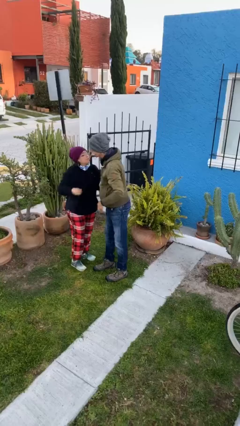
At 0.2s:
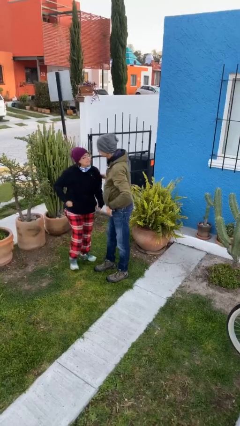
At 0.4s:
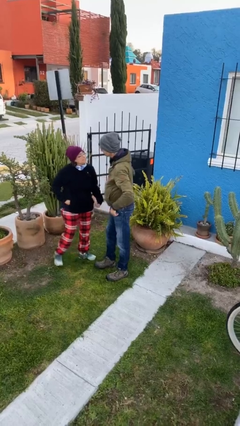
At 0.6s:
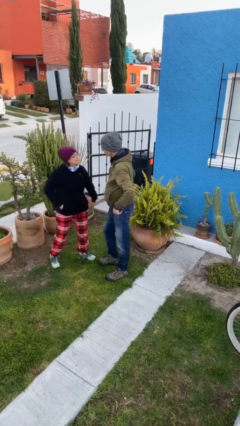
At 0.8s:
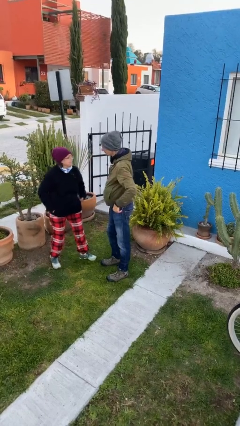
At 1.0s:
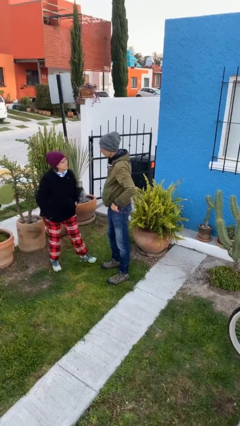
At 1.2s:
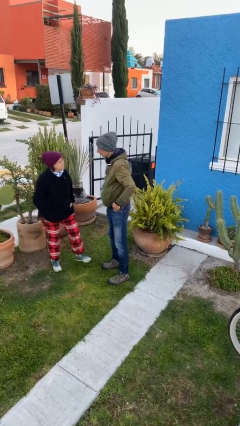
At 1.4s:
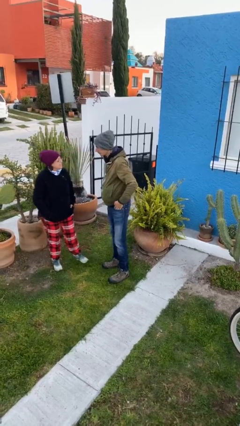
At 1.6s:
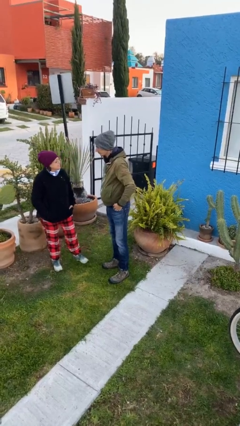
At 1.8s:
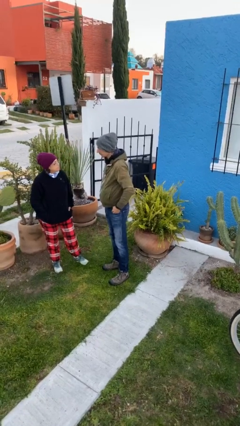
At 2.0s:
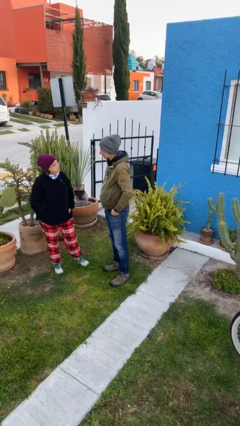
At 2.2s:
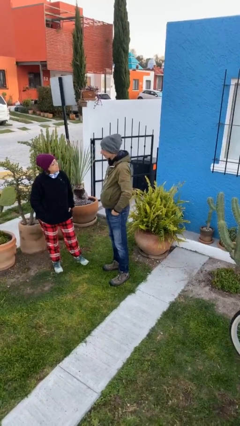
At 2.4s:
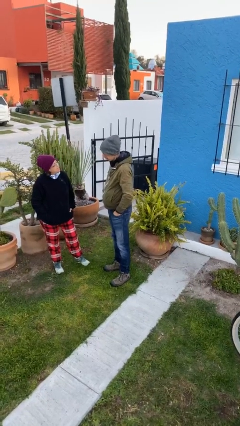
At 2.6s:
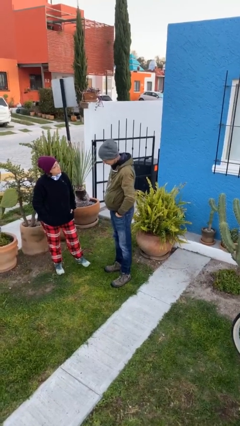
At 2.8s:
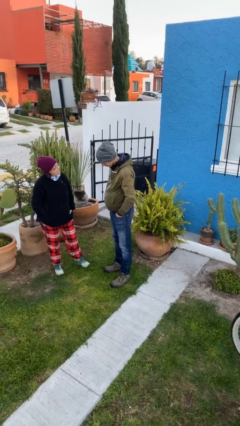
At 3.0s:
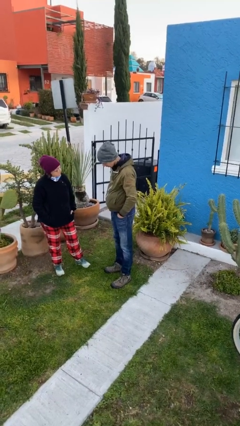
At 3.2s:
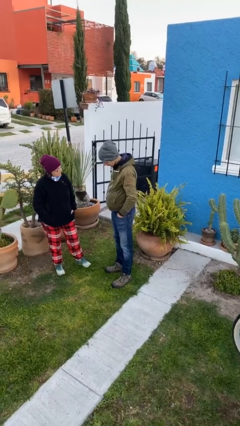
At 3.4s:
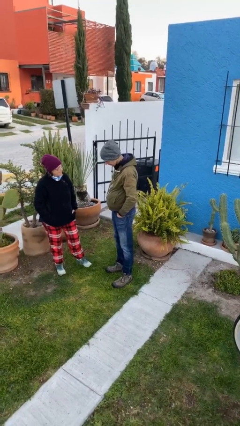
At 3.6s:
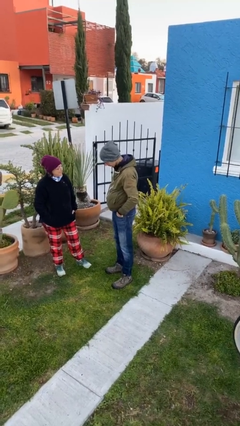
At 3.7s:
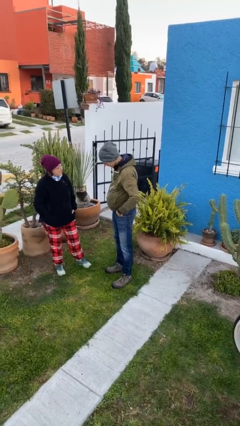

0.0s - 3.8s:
person talks to person

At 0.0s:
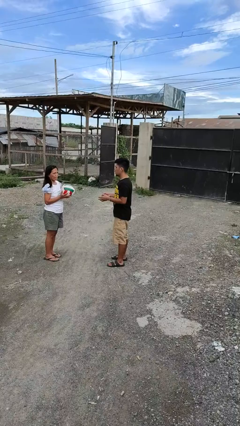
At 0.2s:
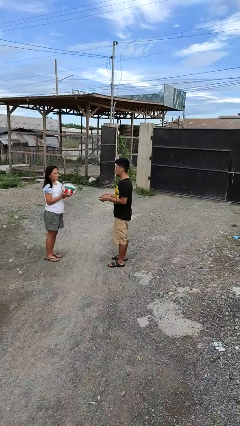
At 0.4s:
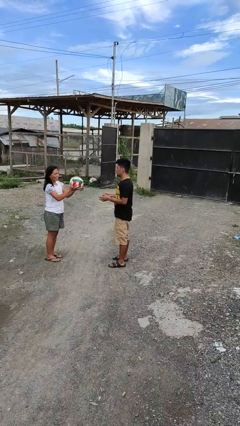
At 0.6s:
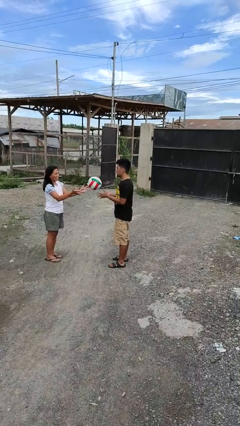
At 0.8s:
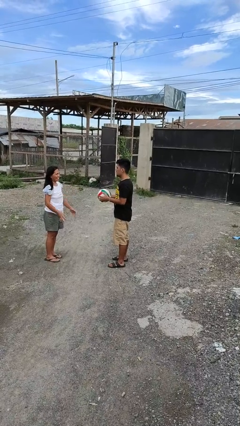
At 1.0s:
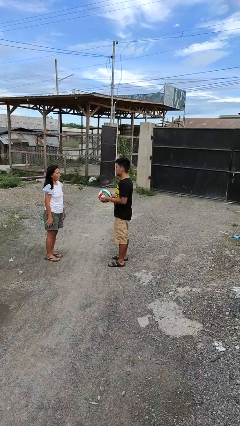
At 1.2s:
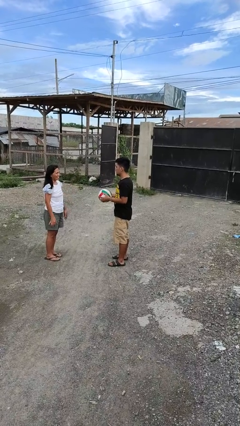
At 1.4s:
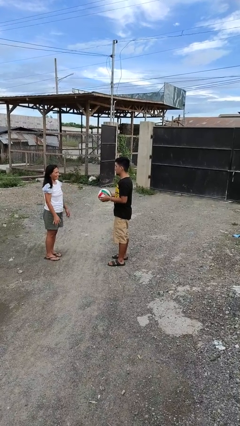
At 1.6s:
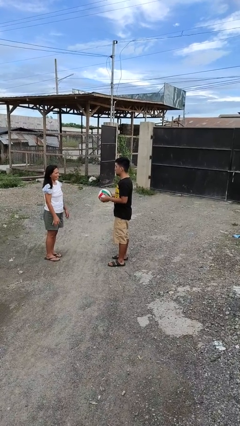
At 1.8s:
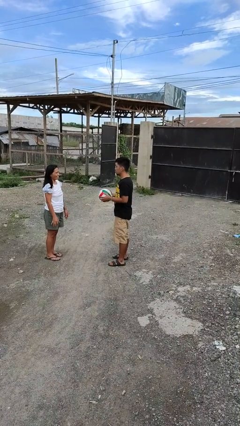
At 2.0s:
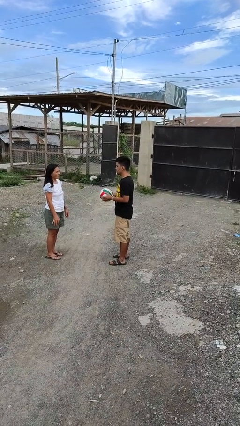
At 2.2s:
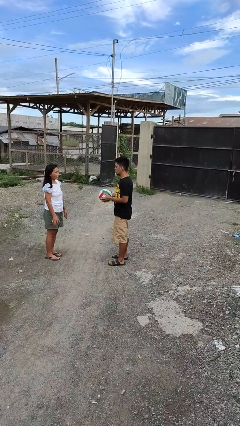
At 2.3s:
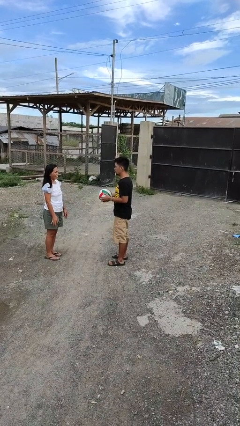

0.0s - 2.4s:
person catches object from person

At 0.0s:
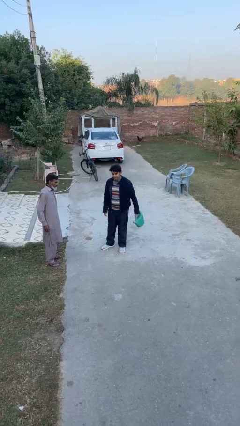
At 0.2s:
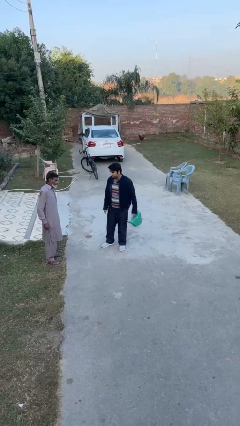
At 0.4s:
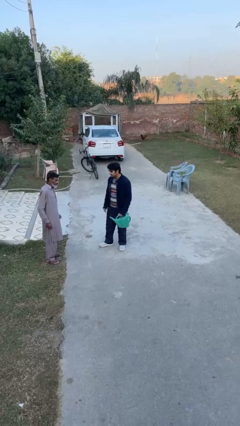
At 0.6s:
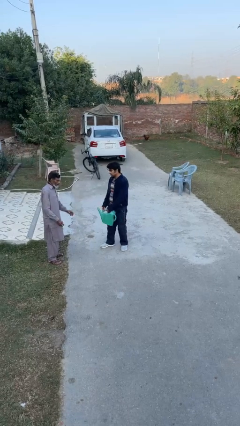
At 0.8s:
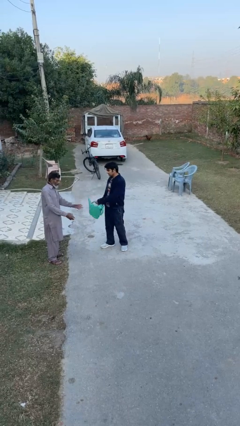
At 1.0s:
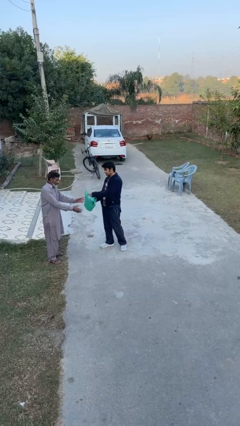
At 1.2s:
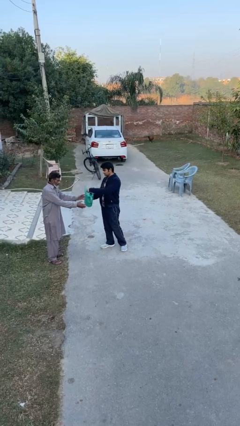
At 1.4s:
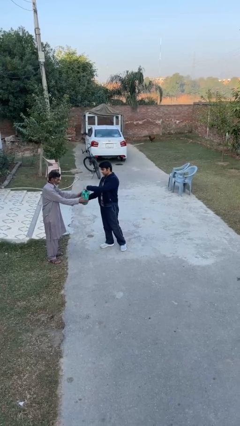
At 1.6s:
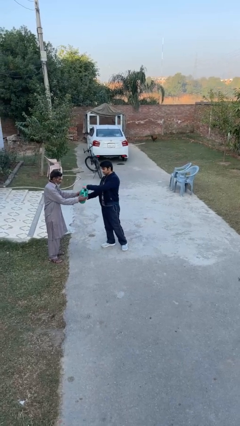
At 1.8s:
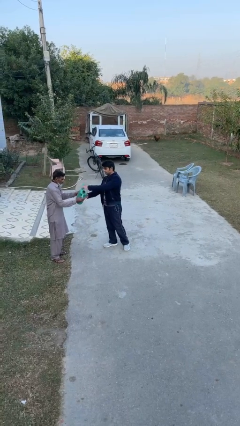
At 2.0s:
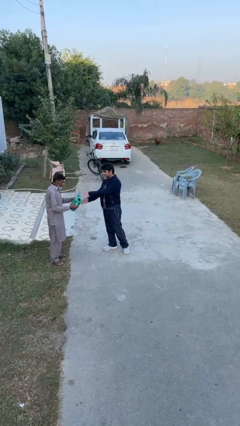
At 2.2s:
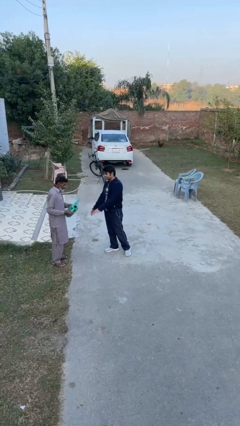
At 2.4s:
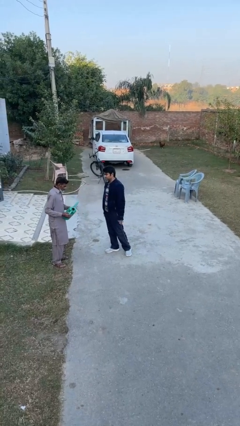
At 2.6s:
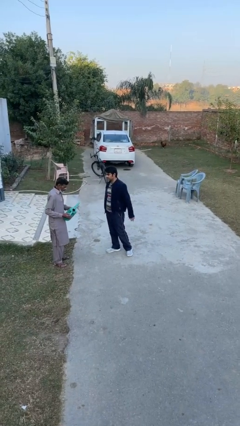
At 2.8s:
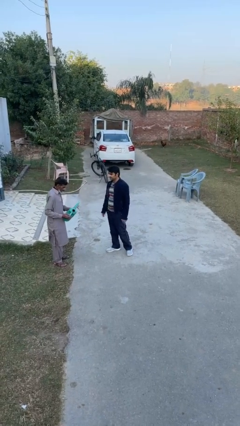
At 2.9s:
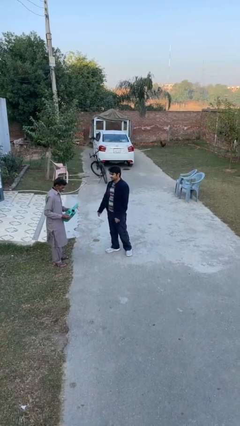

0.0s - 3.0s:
person transfers object to person

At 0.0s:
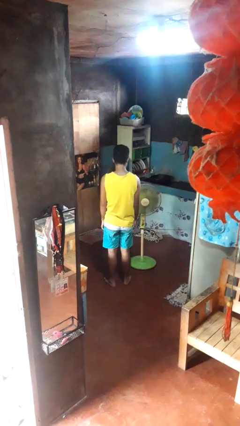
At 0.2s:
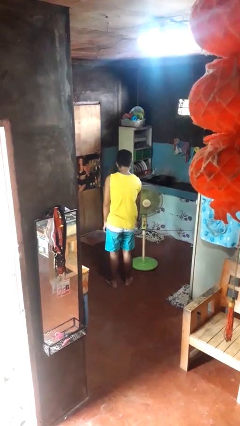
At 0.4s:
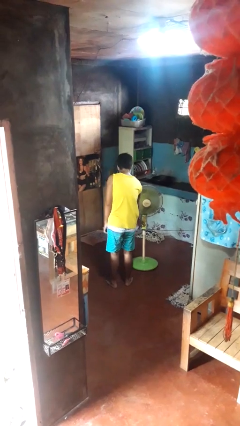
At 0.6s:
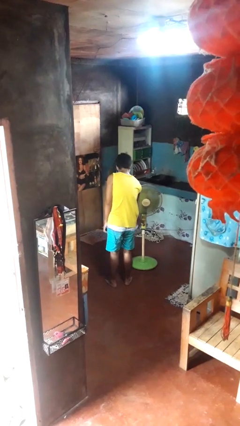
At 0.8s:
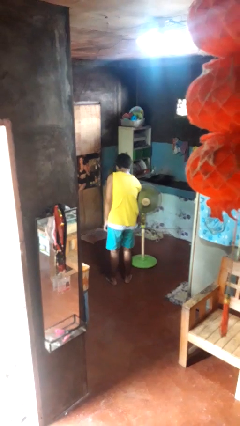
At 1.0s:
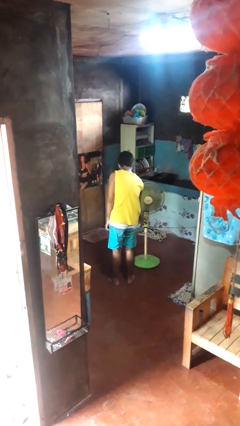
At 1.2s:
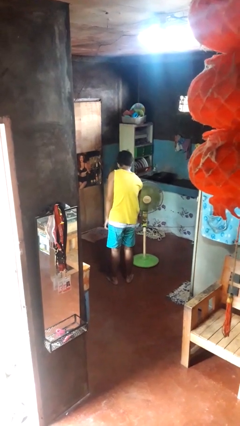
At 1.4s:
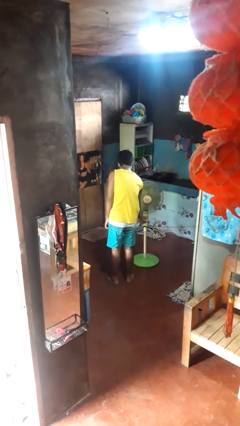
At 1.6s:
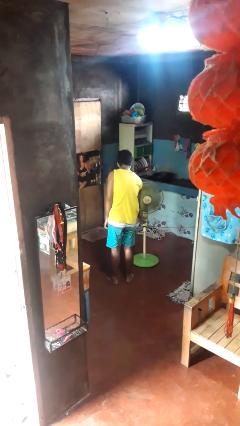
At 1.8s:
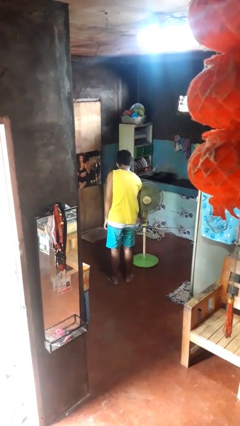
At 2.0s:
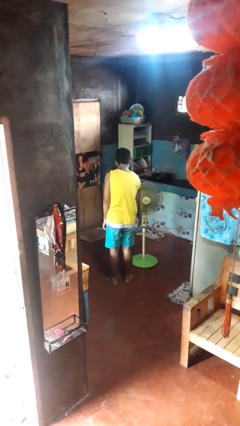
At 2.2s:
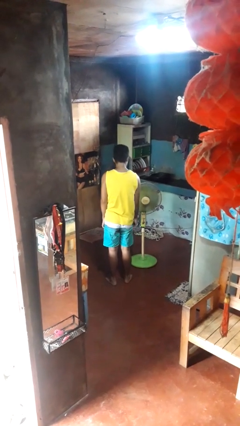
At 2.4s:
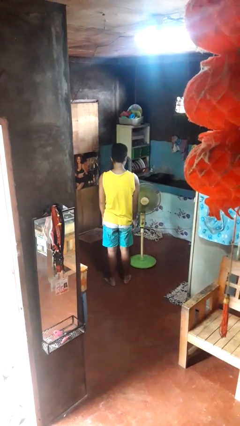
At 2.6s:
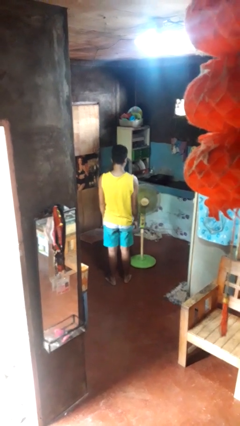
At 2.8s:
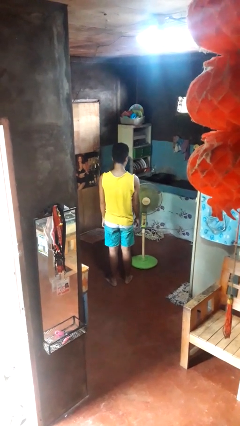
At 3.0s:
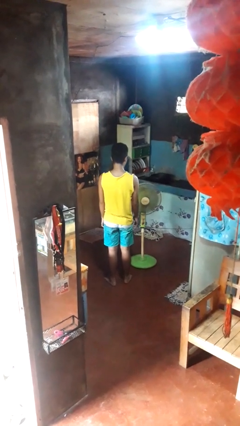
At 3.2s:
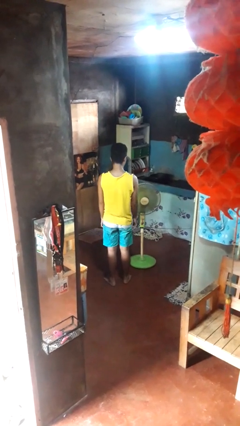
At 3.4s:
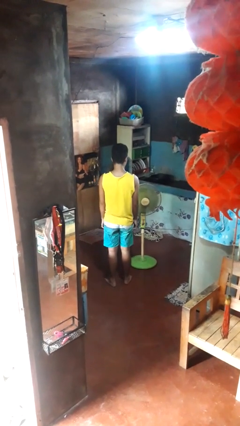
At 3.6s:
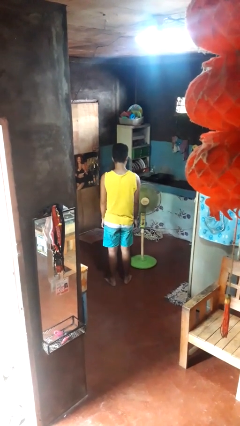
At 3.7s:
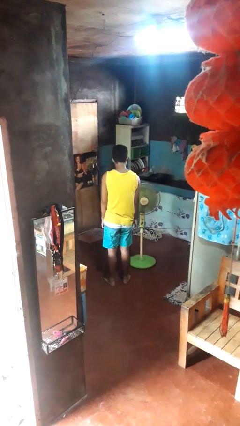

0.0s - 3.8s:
person turns on fan

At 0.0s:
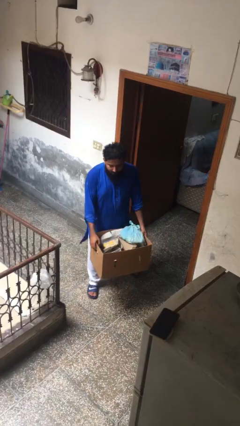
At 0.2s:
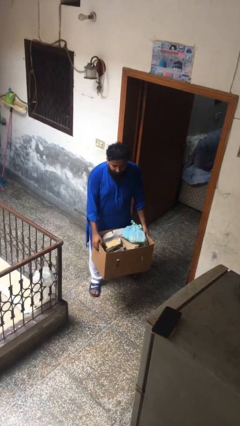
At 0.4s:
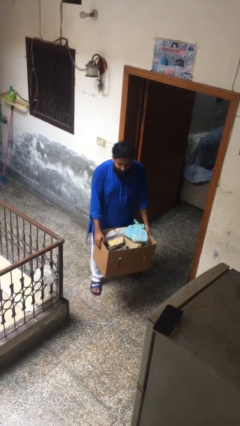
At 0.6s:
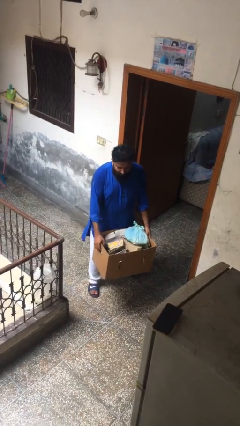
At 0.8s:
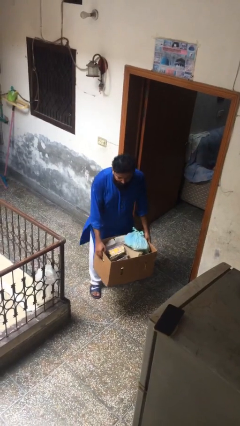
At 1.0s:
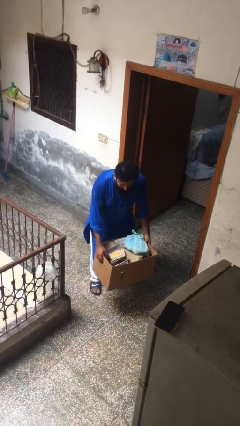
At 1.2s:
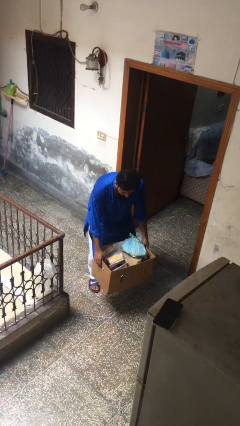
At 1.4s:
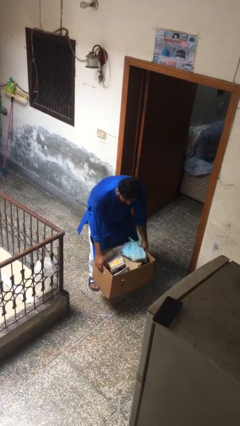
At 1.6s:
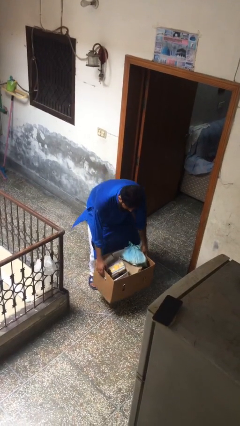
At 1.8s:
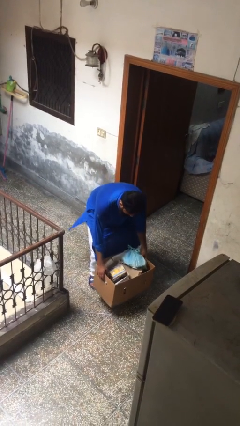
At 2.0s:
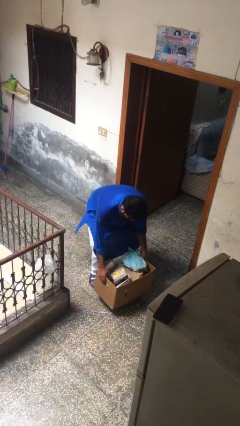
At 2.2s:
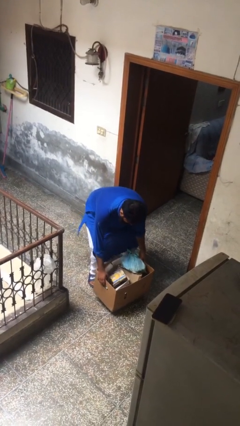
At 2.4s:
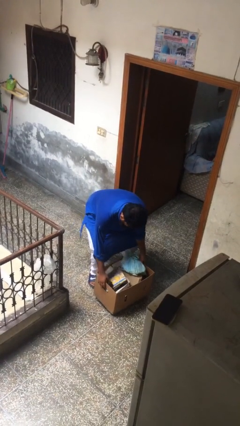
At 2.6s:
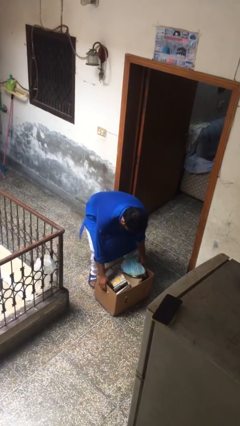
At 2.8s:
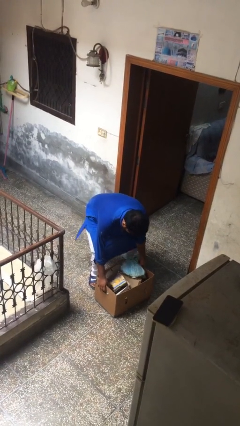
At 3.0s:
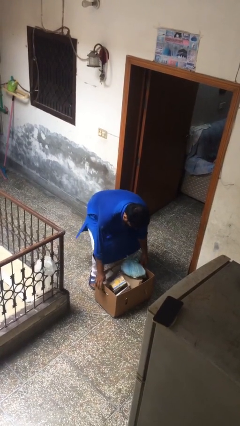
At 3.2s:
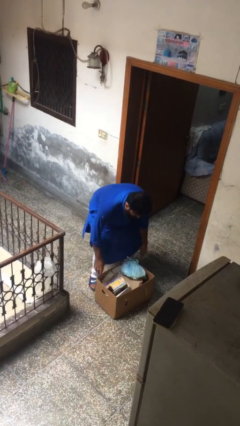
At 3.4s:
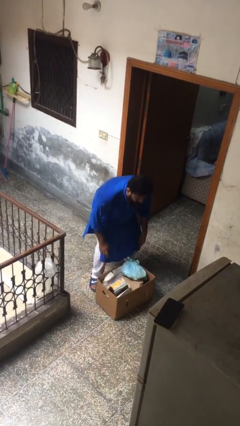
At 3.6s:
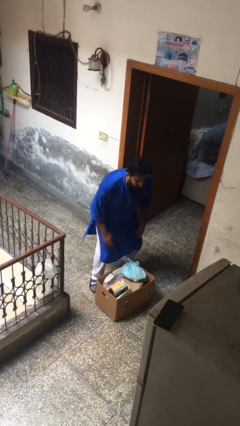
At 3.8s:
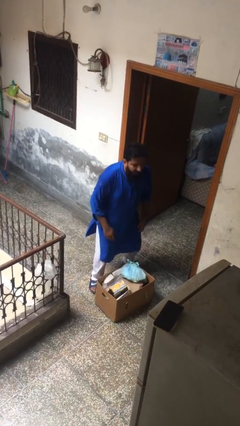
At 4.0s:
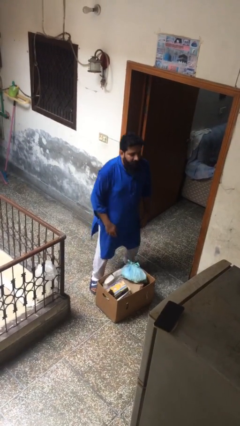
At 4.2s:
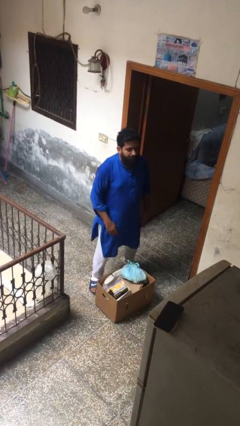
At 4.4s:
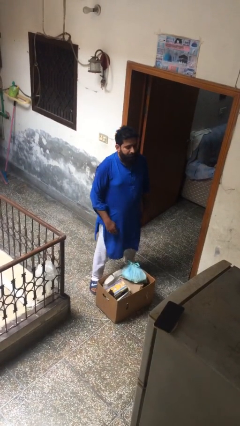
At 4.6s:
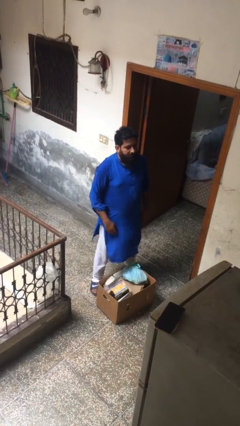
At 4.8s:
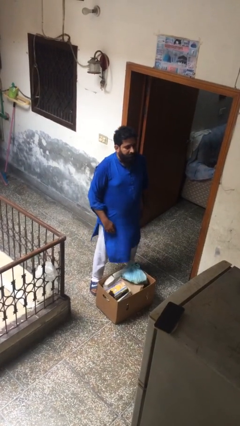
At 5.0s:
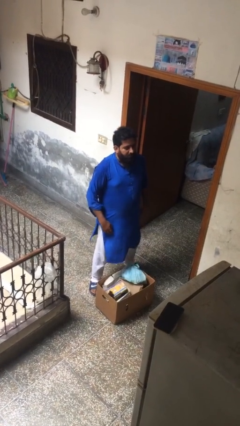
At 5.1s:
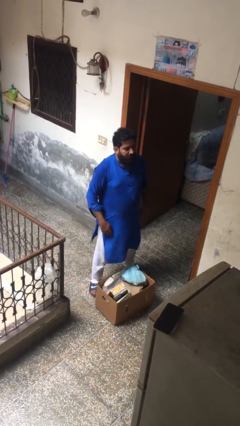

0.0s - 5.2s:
person puts down object on floor
